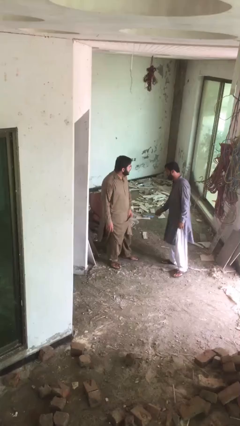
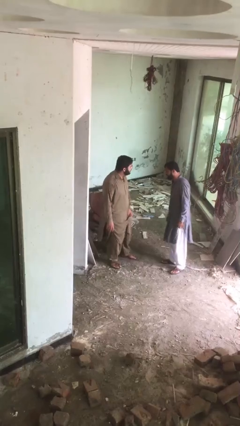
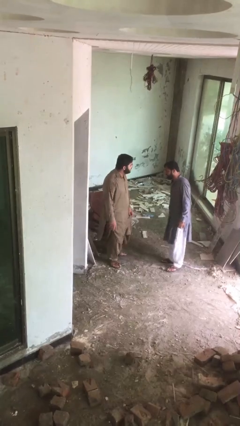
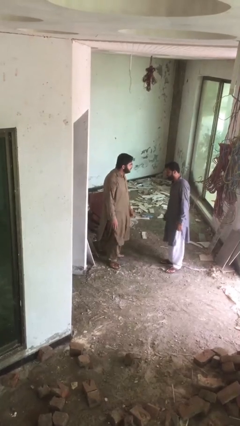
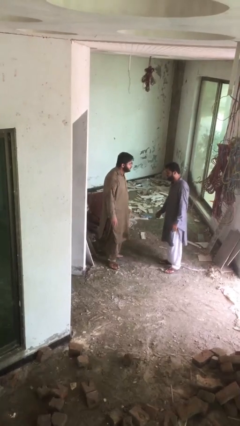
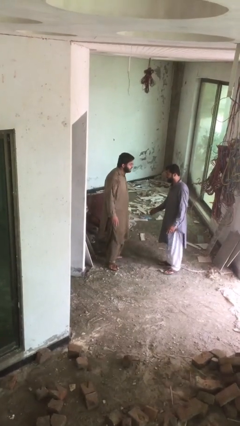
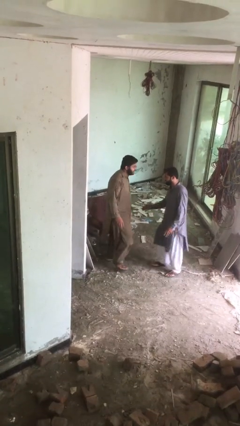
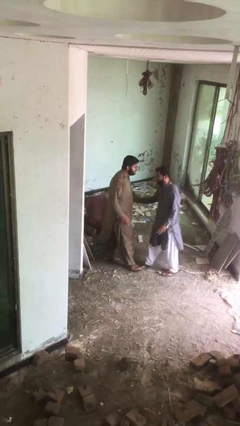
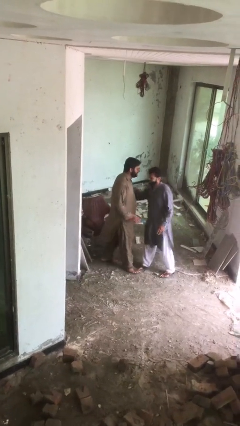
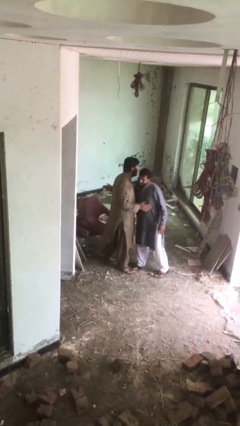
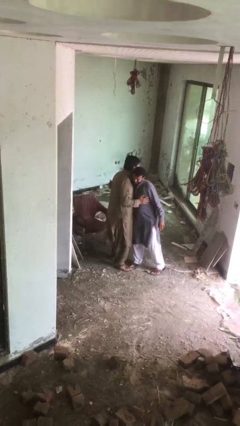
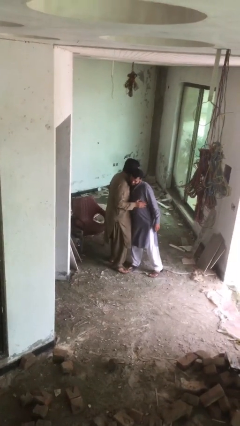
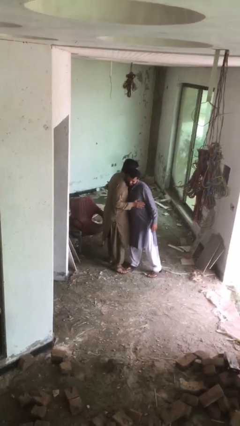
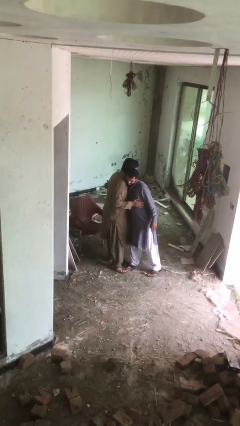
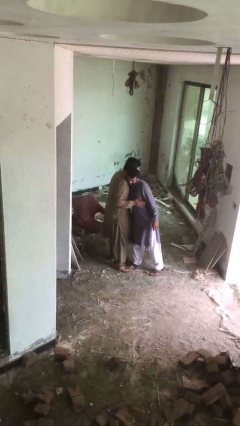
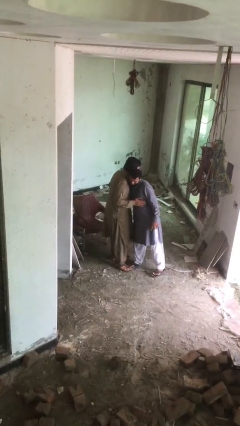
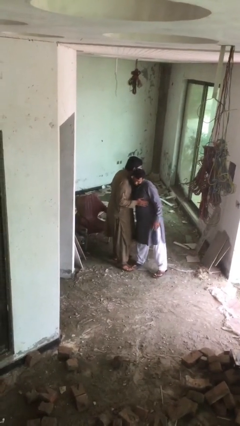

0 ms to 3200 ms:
person embraces person

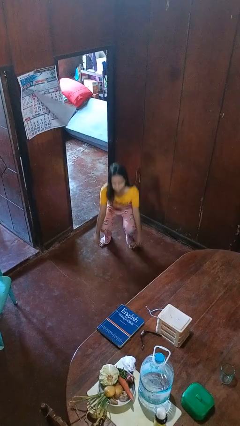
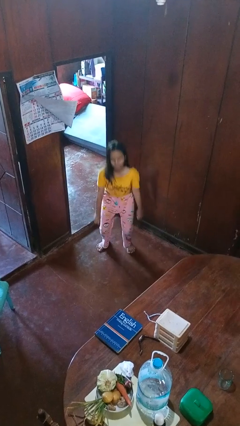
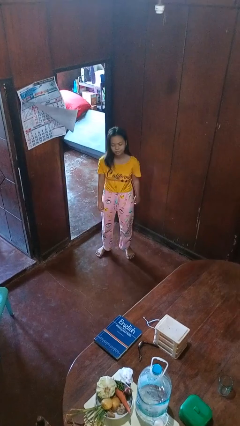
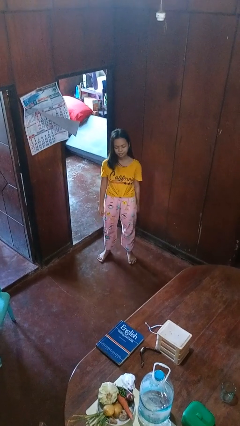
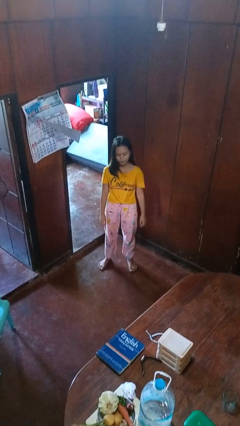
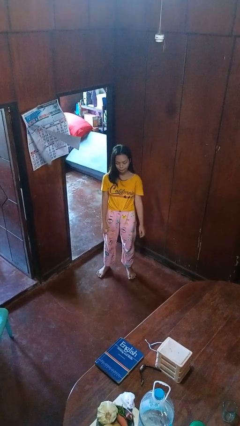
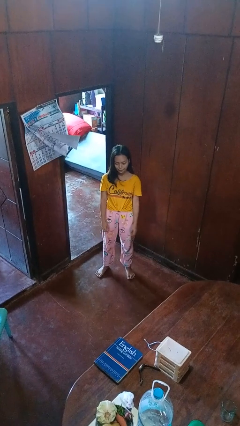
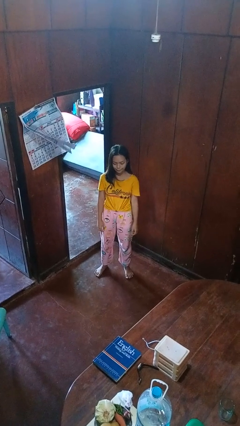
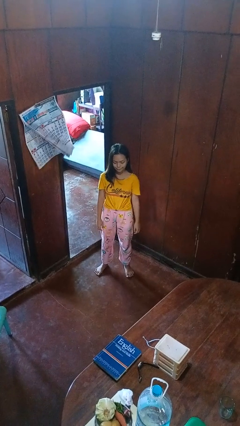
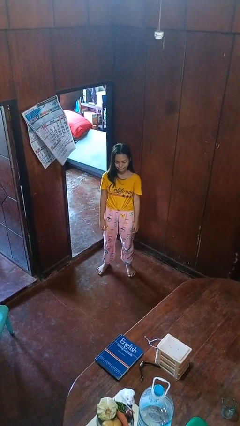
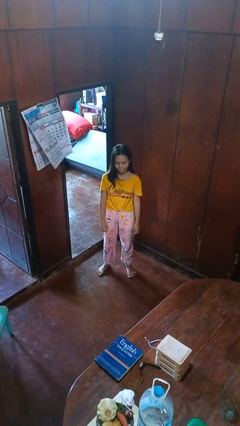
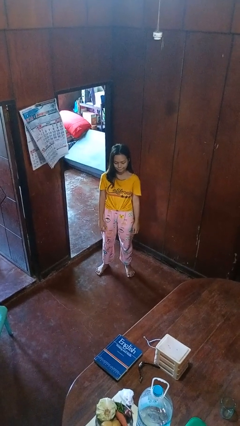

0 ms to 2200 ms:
person stands up

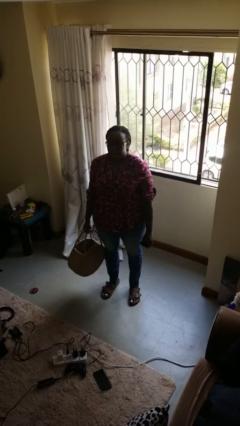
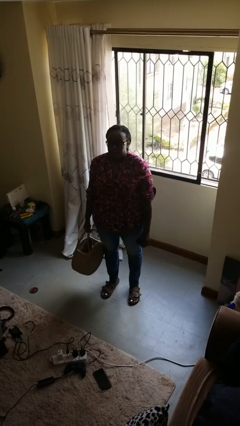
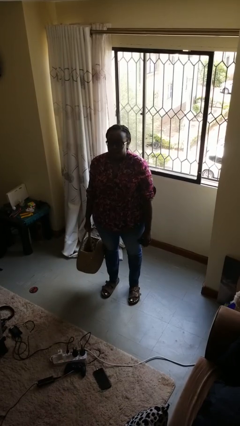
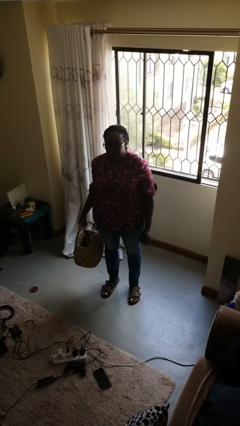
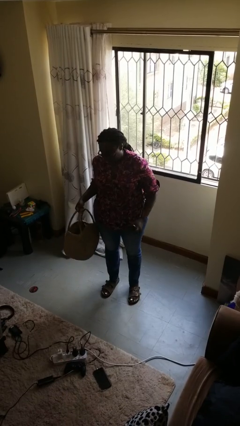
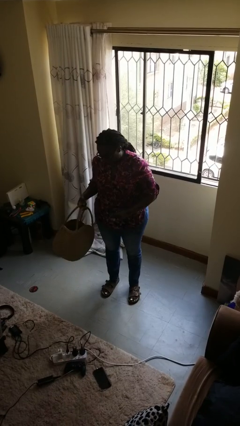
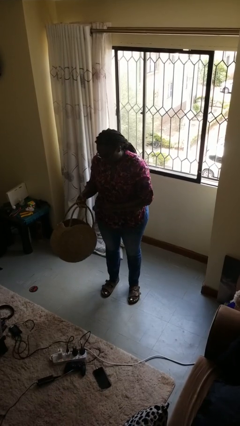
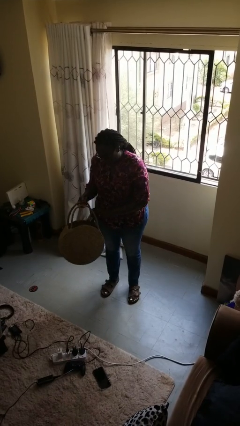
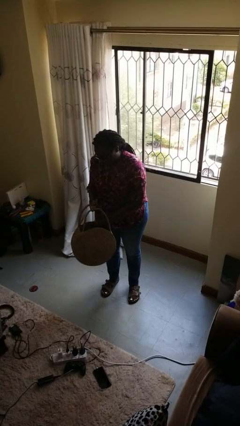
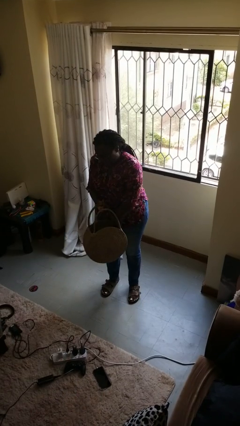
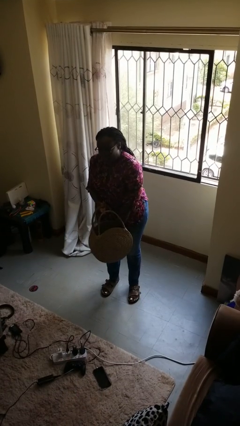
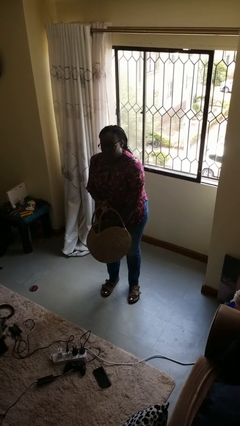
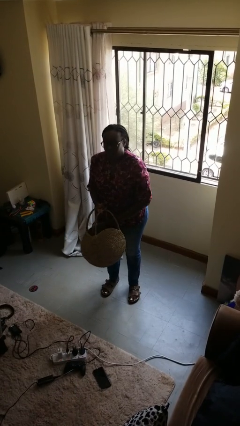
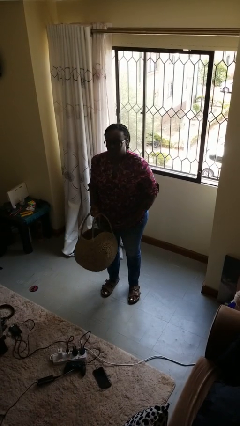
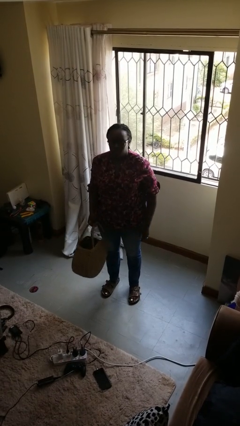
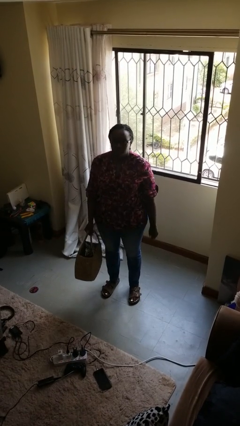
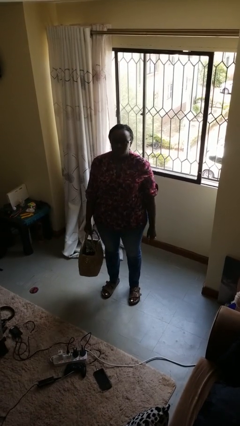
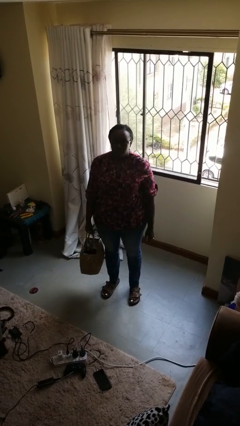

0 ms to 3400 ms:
person puts object into basket

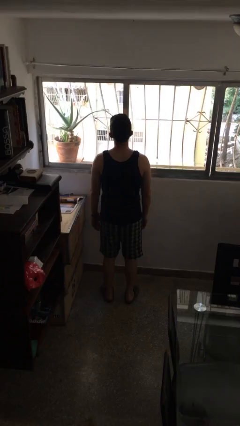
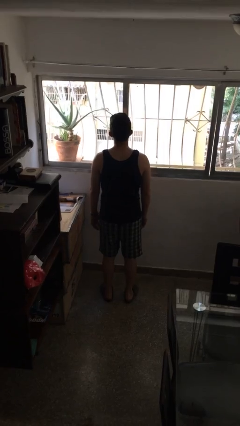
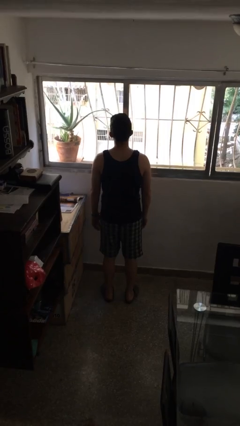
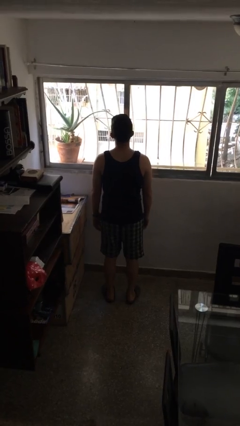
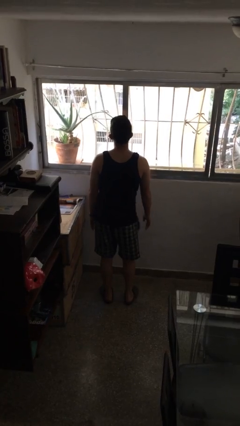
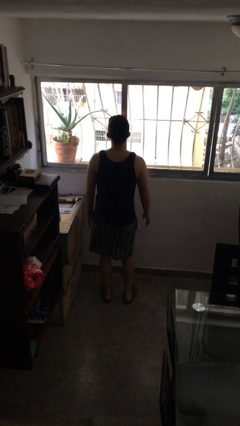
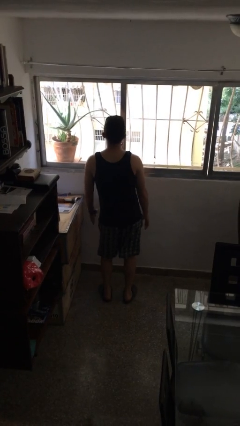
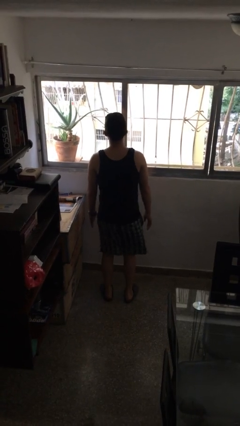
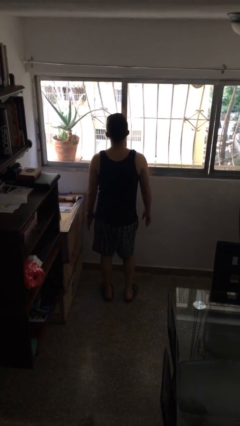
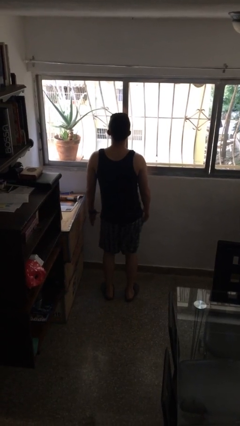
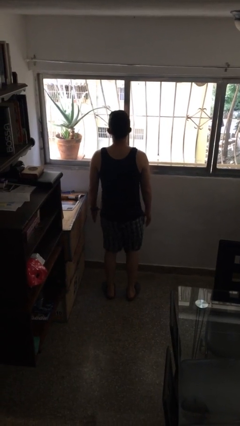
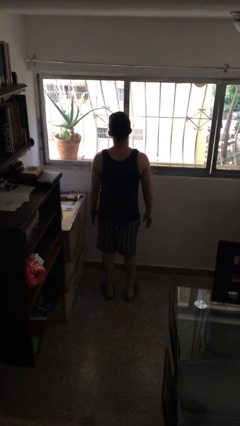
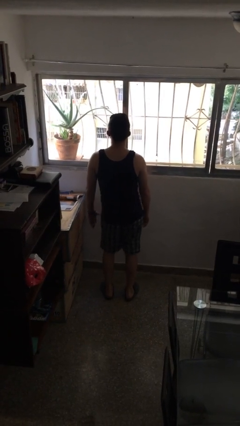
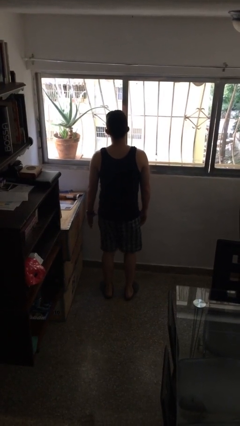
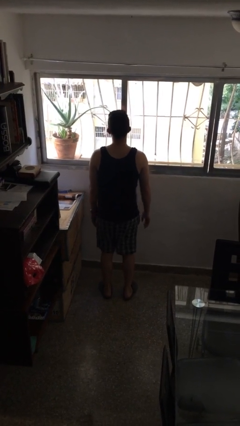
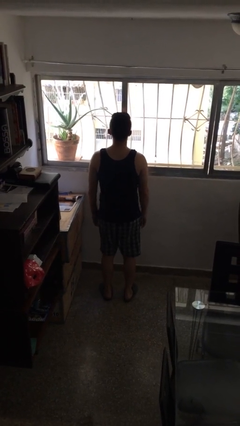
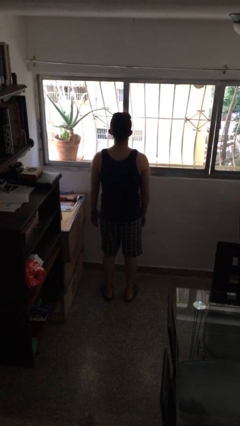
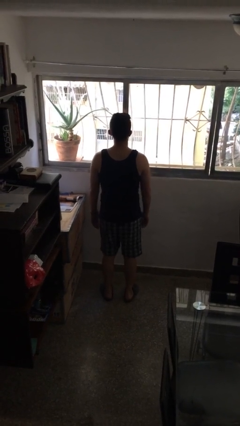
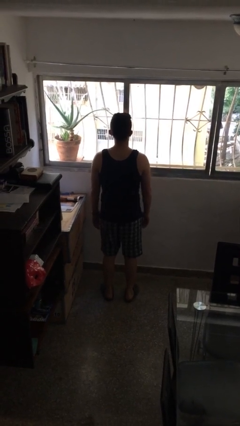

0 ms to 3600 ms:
person wiggles hips

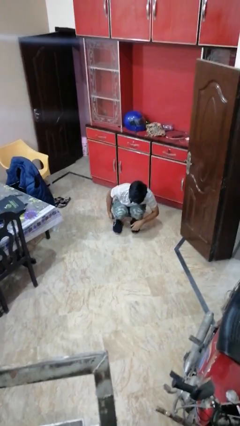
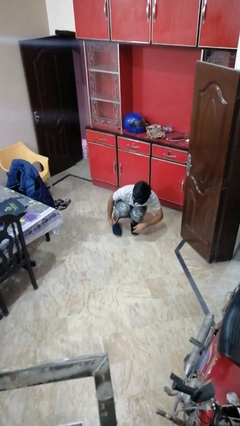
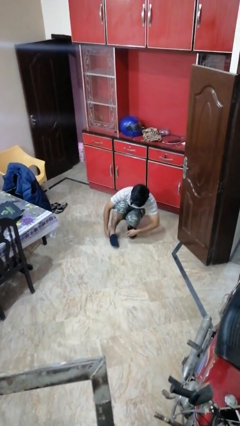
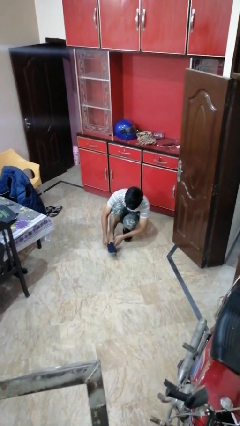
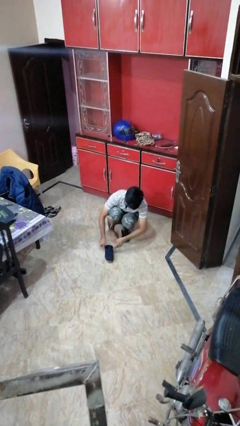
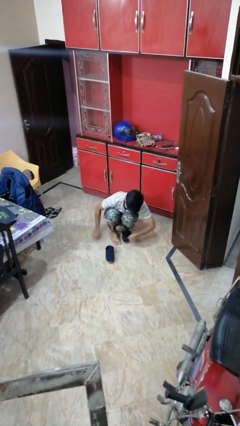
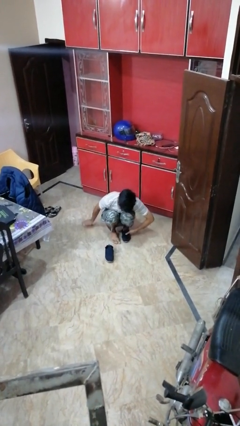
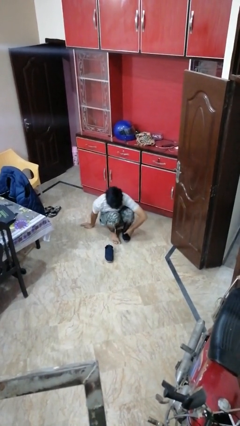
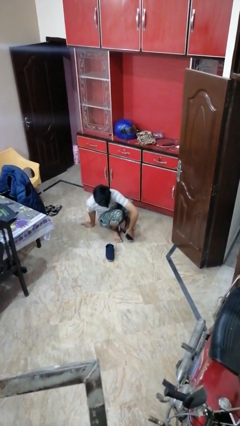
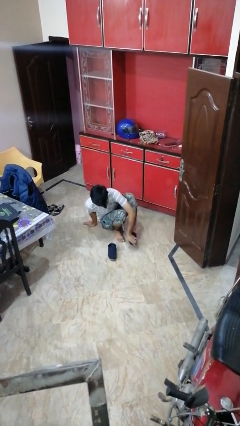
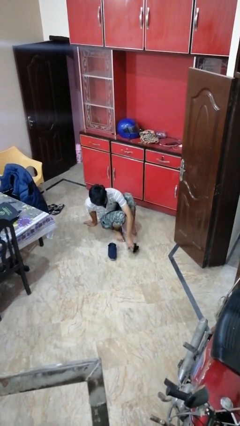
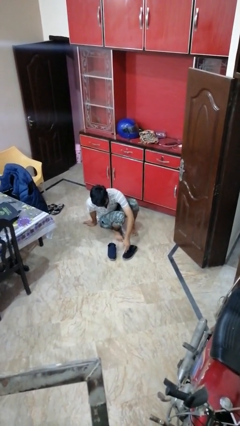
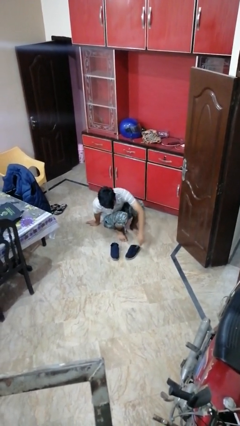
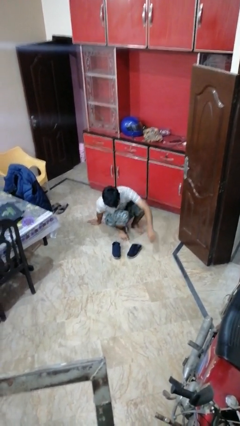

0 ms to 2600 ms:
person takes off shoes

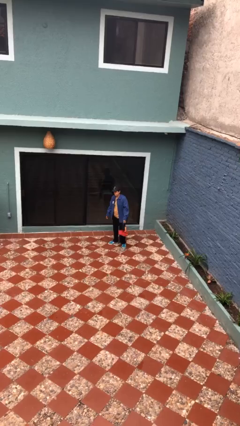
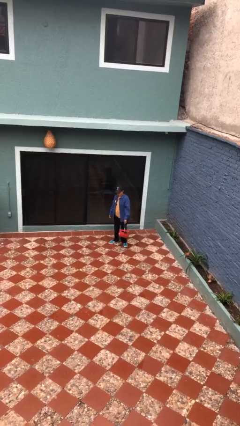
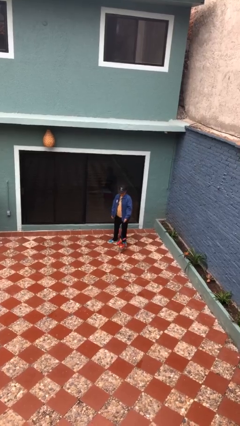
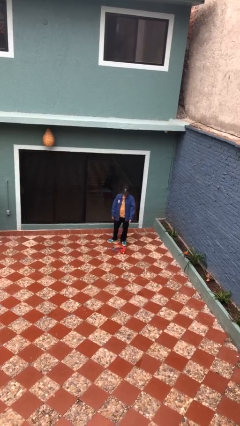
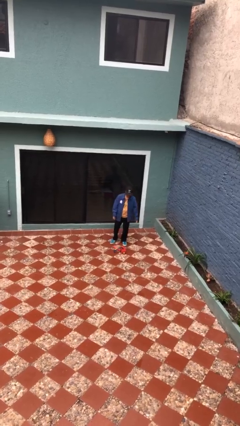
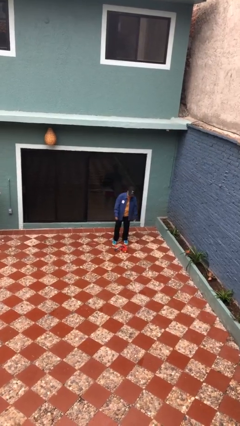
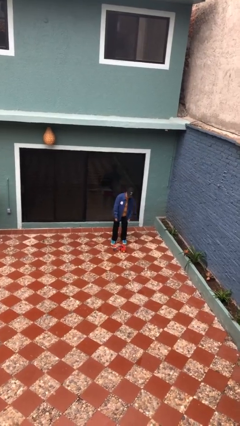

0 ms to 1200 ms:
person drops object

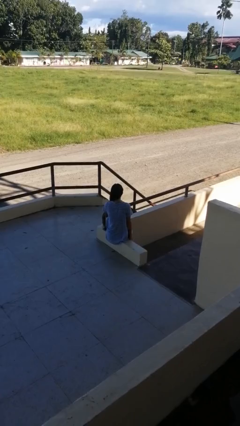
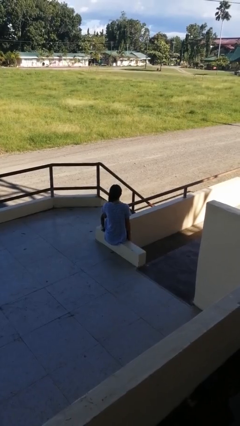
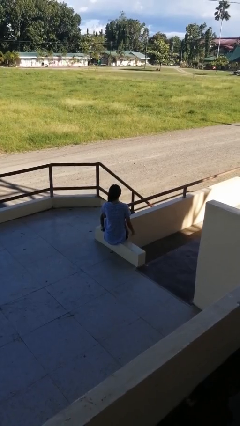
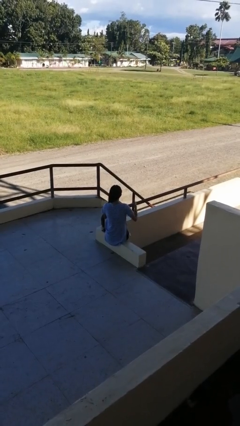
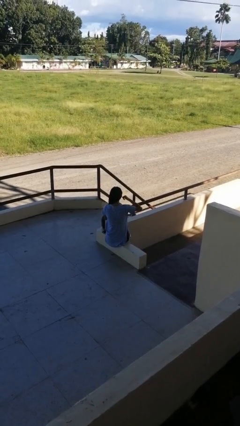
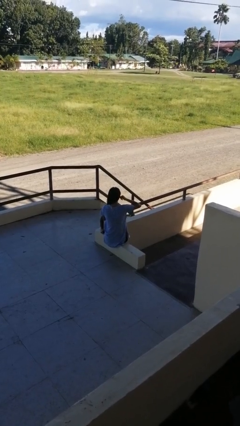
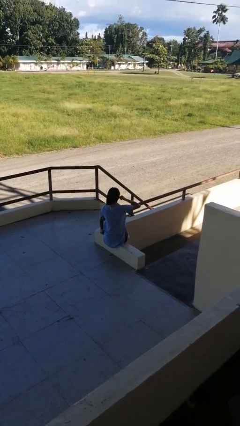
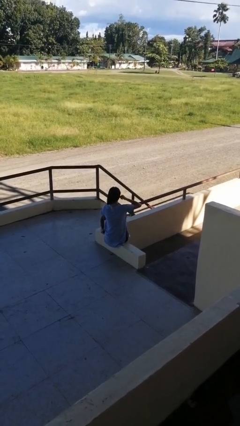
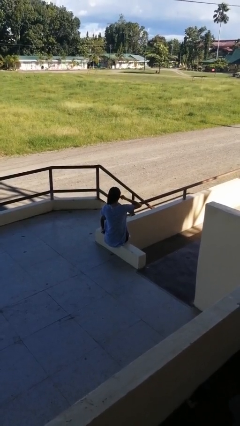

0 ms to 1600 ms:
person gestures call me
